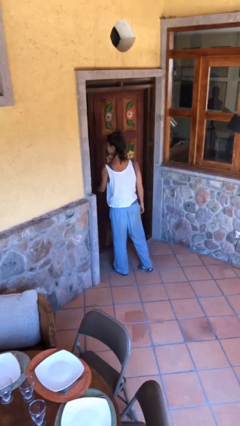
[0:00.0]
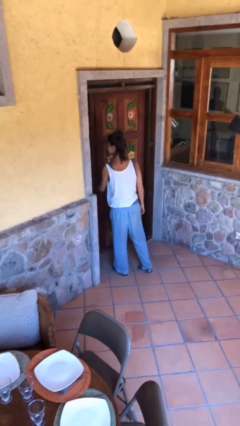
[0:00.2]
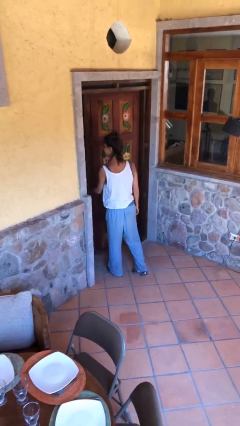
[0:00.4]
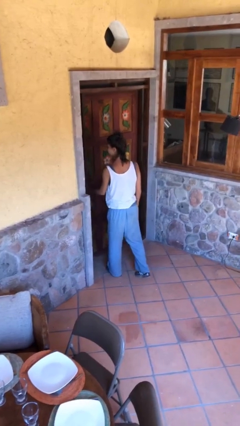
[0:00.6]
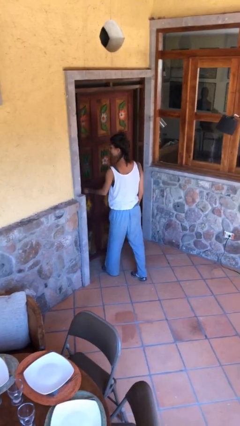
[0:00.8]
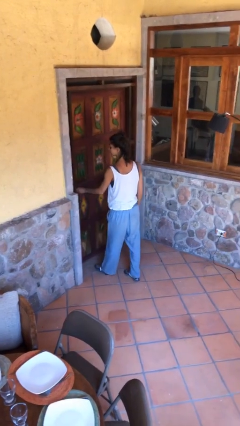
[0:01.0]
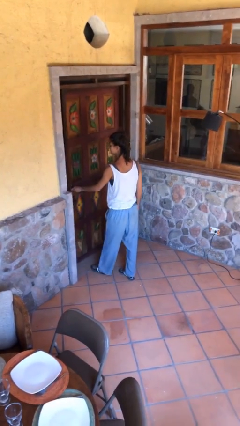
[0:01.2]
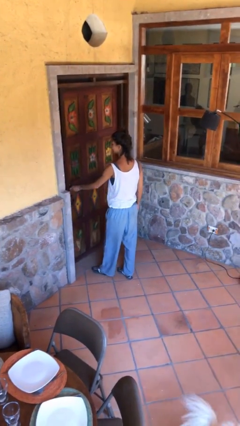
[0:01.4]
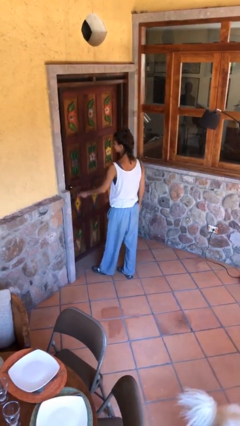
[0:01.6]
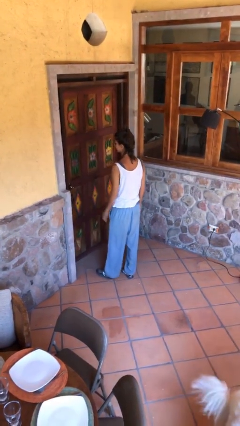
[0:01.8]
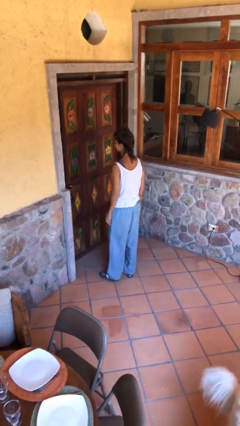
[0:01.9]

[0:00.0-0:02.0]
person closes facility door

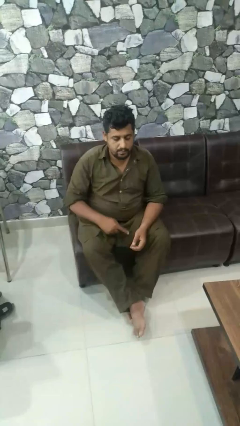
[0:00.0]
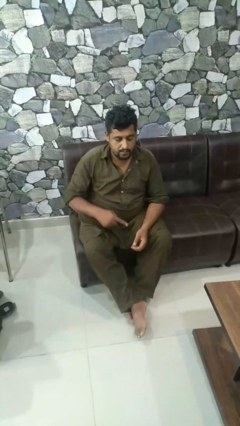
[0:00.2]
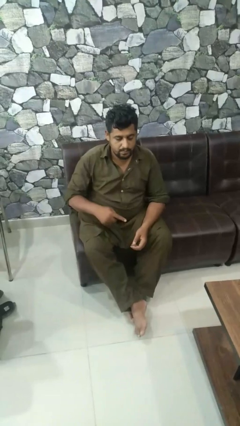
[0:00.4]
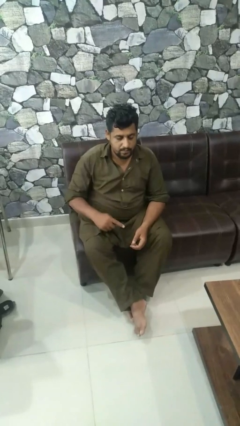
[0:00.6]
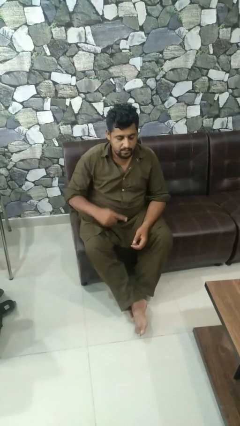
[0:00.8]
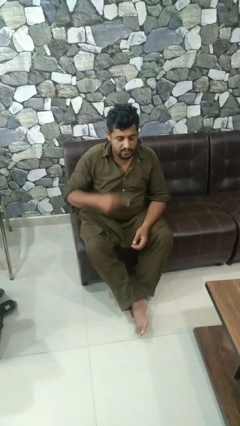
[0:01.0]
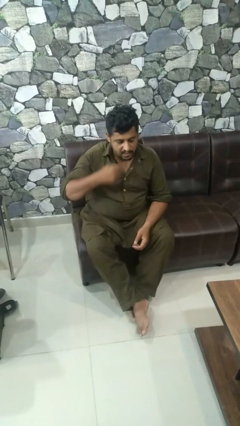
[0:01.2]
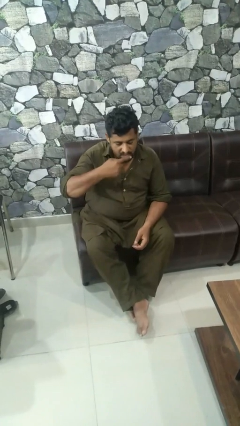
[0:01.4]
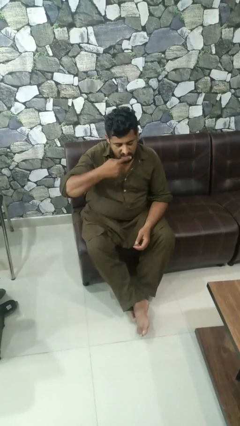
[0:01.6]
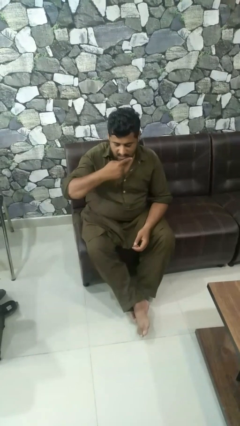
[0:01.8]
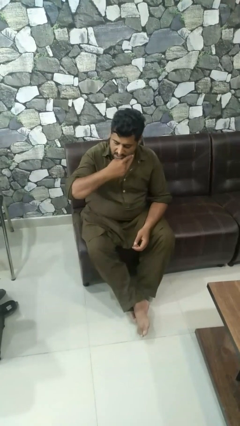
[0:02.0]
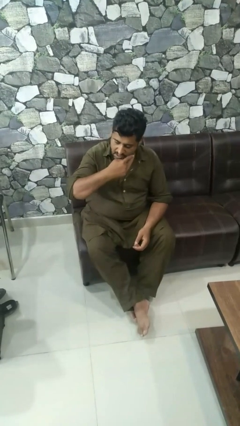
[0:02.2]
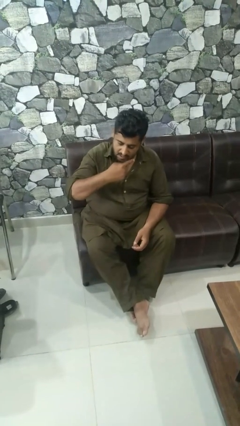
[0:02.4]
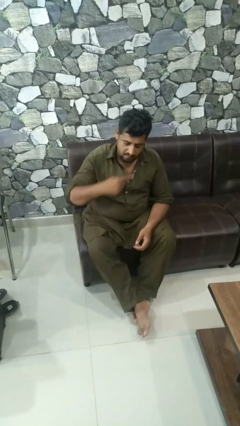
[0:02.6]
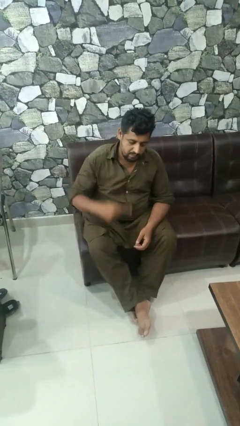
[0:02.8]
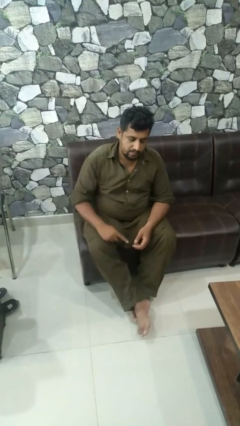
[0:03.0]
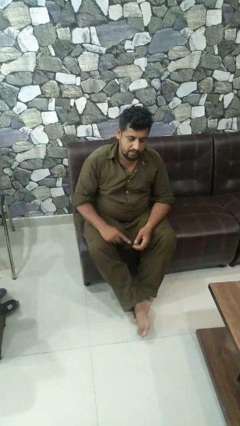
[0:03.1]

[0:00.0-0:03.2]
person brushes teeth

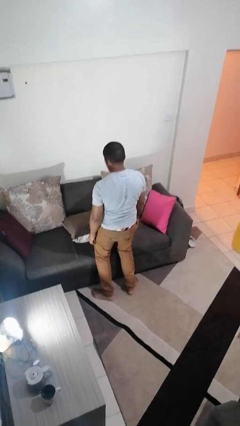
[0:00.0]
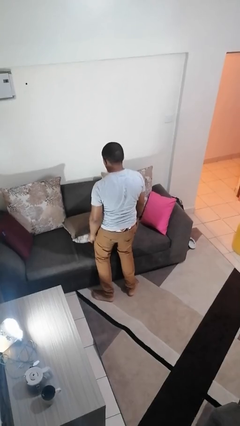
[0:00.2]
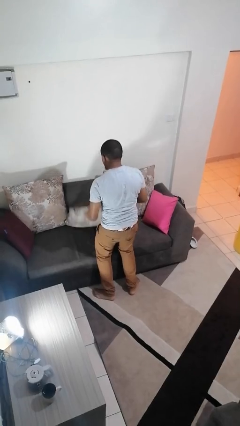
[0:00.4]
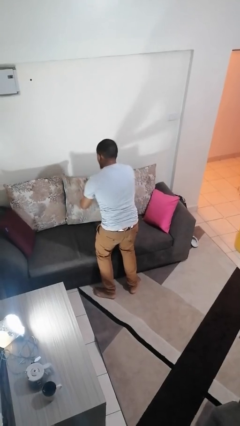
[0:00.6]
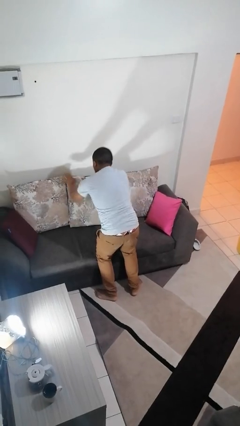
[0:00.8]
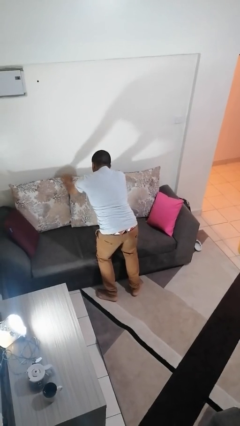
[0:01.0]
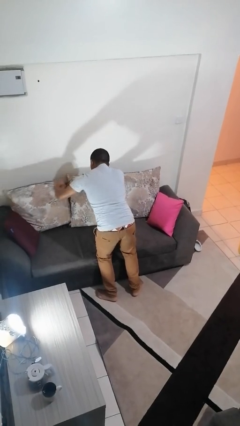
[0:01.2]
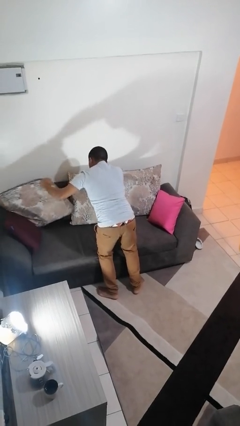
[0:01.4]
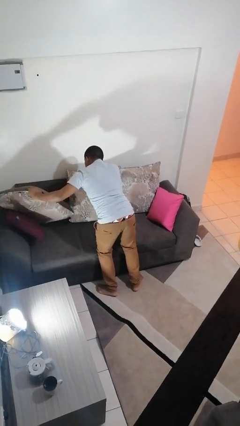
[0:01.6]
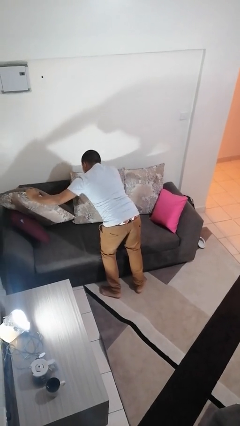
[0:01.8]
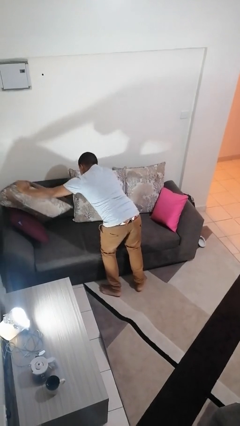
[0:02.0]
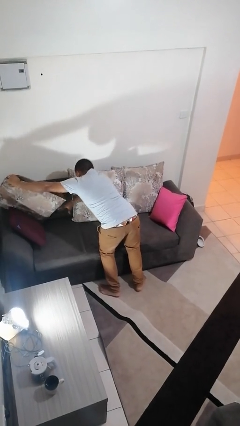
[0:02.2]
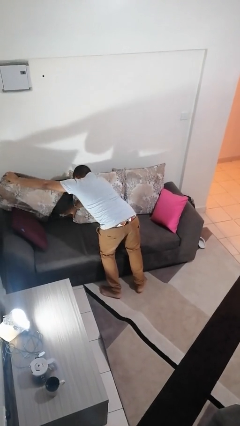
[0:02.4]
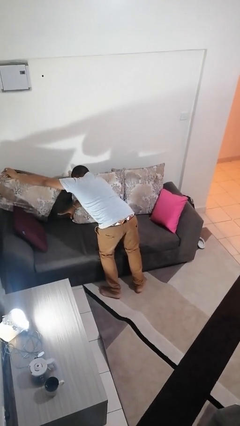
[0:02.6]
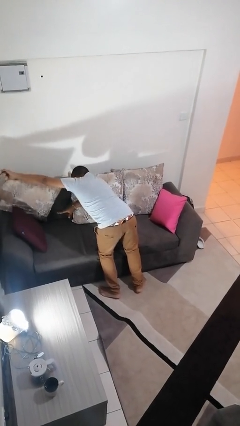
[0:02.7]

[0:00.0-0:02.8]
person searches in couch

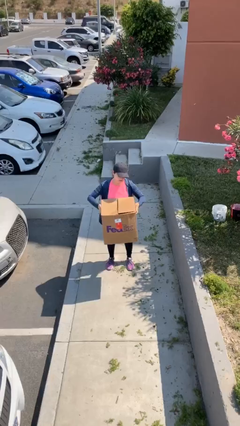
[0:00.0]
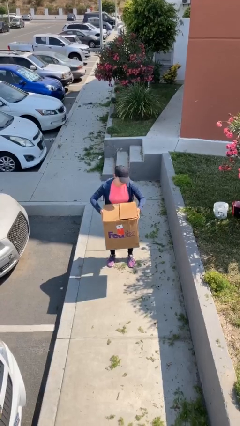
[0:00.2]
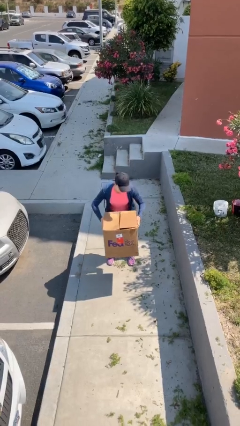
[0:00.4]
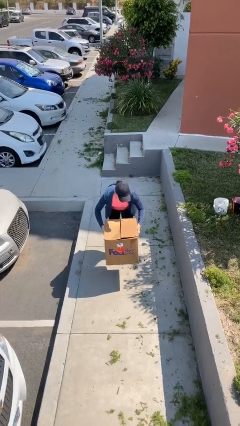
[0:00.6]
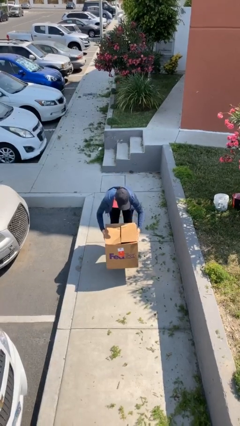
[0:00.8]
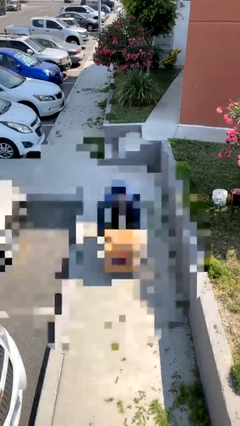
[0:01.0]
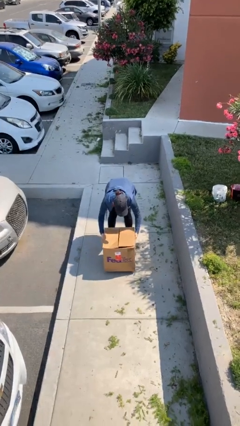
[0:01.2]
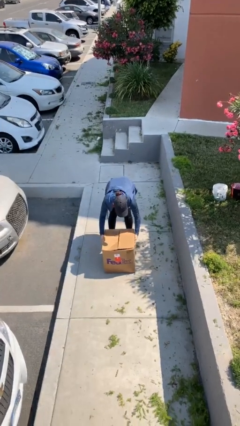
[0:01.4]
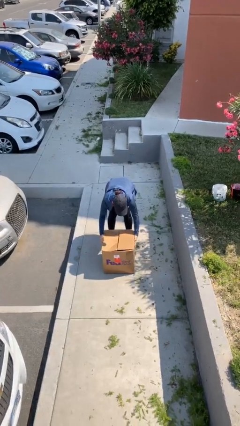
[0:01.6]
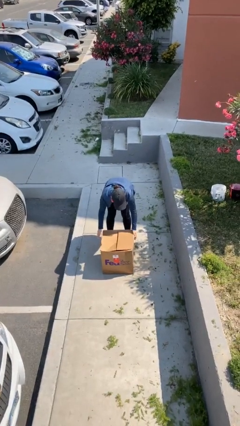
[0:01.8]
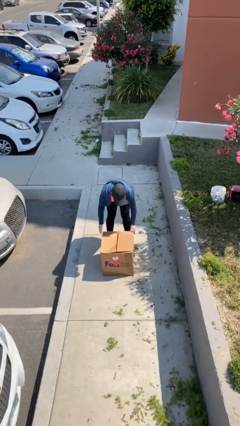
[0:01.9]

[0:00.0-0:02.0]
person puts down object on floor

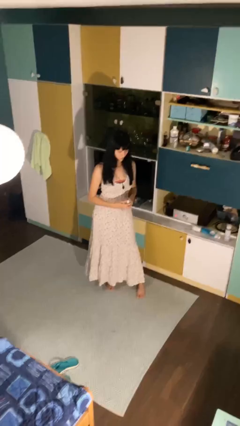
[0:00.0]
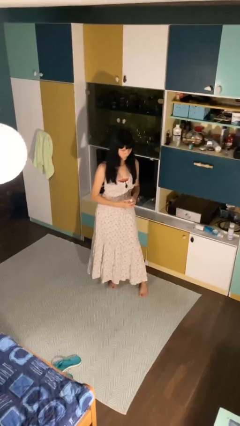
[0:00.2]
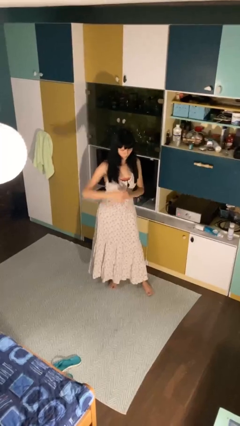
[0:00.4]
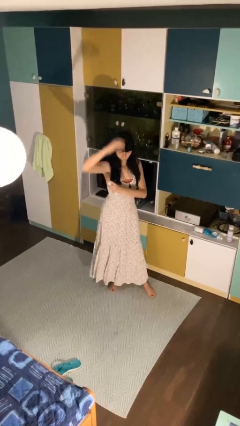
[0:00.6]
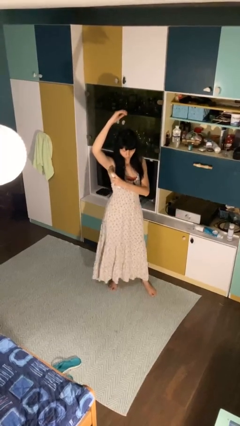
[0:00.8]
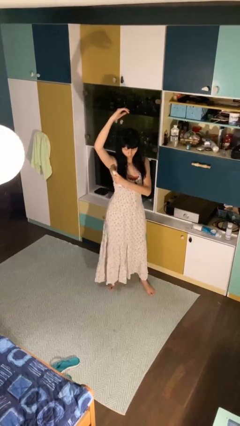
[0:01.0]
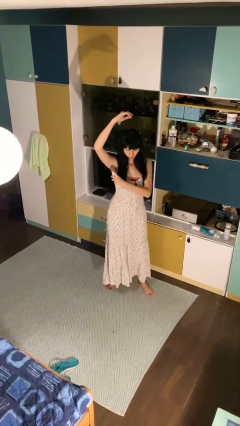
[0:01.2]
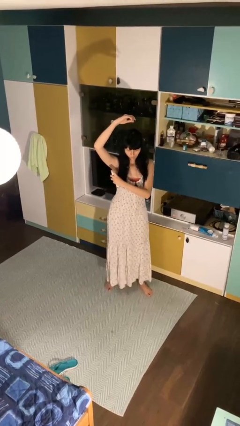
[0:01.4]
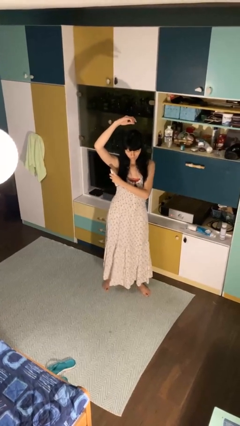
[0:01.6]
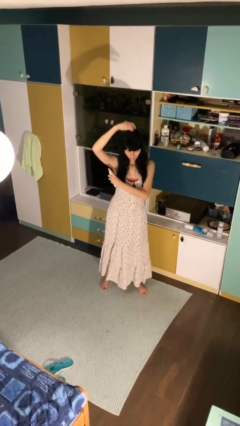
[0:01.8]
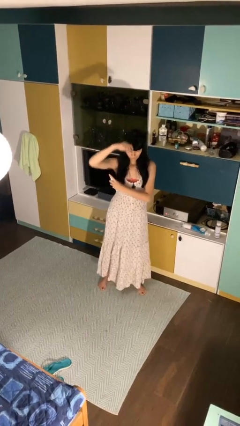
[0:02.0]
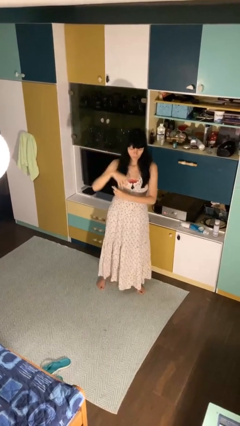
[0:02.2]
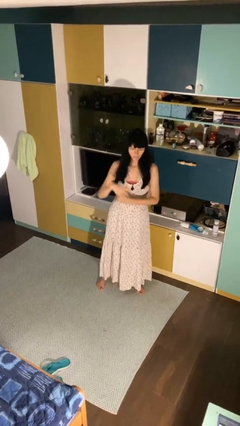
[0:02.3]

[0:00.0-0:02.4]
person applies deodorant

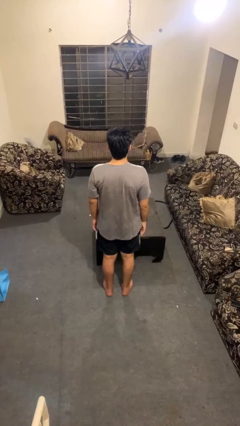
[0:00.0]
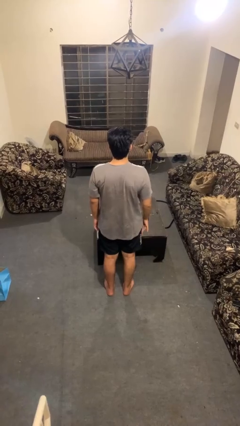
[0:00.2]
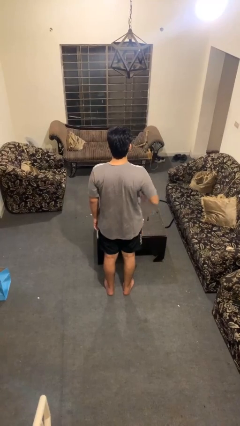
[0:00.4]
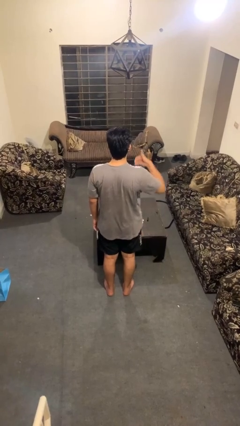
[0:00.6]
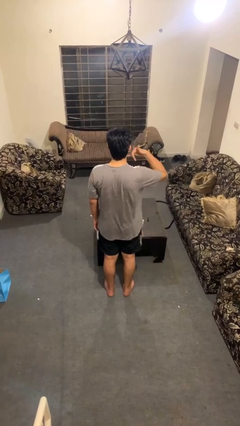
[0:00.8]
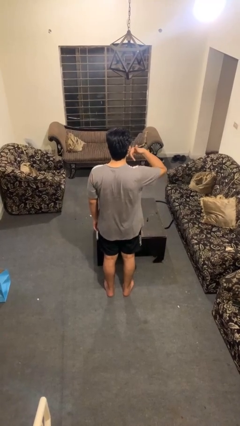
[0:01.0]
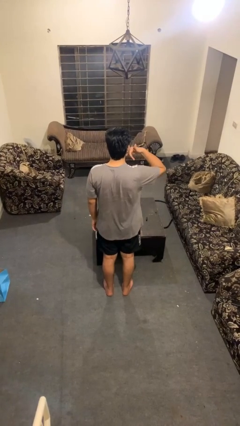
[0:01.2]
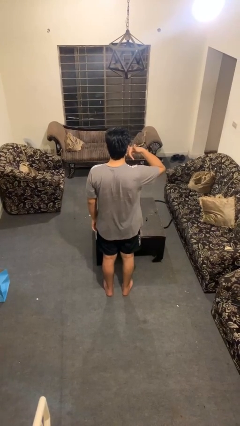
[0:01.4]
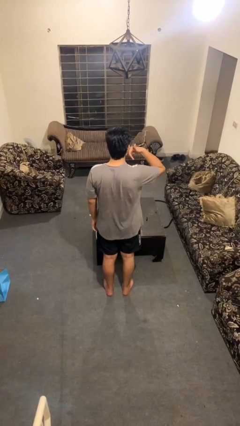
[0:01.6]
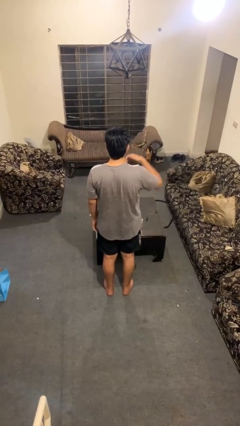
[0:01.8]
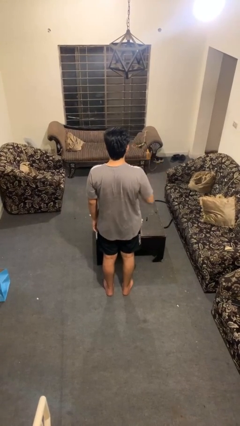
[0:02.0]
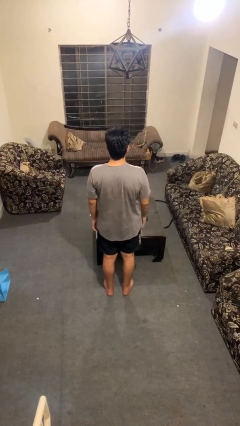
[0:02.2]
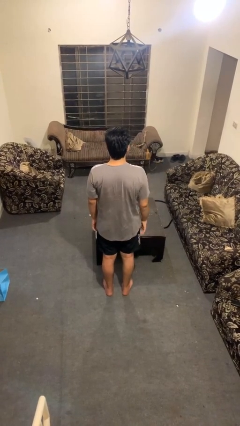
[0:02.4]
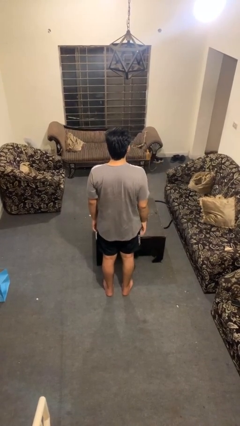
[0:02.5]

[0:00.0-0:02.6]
person gestures call me

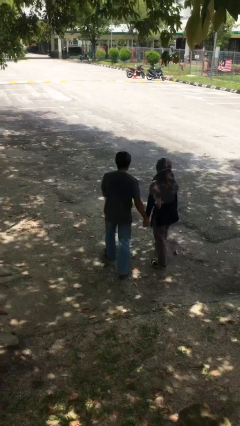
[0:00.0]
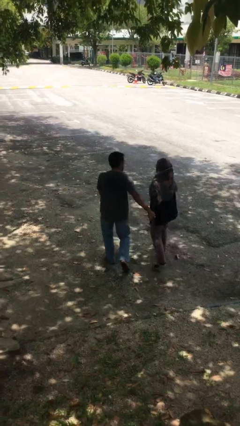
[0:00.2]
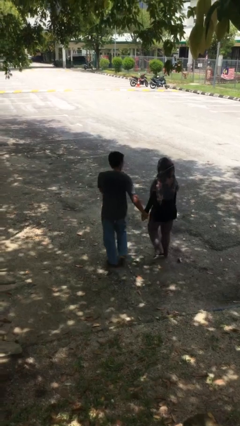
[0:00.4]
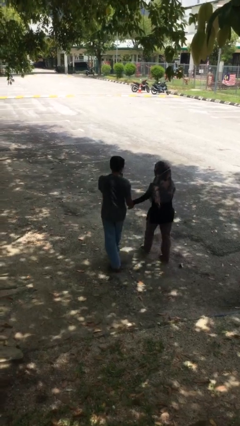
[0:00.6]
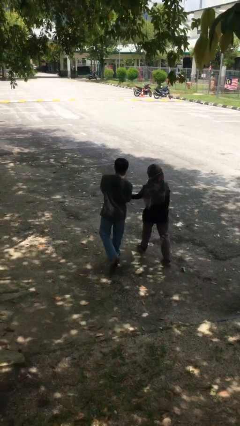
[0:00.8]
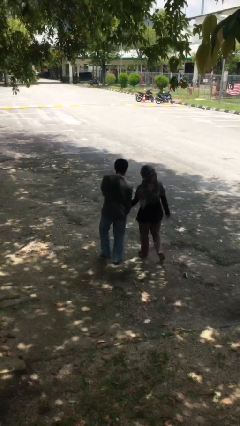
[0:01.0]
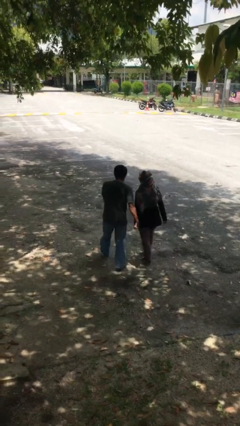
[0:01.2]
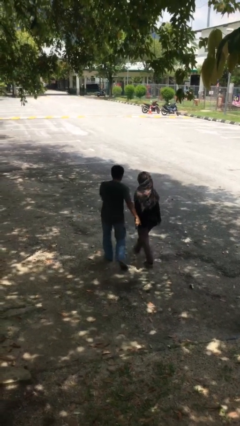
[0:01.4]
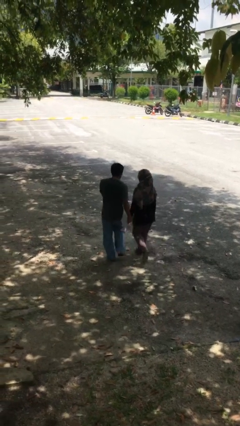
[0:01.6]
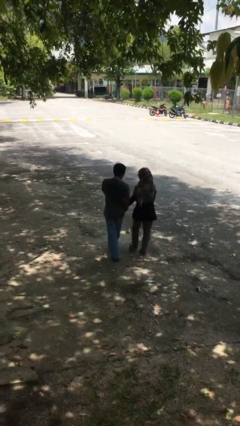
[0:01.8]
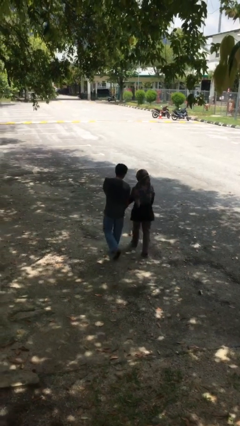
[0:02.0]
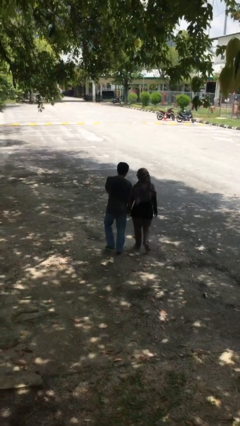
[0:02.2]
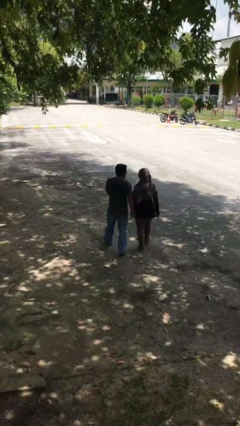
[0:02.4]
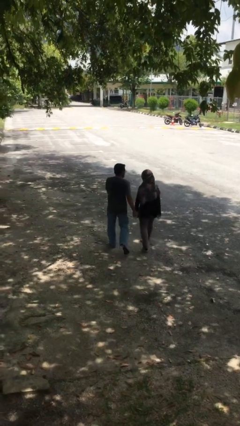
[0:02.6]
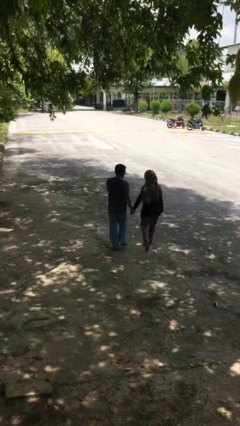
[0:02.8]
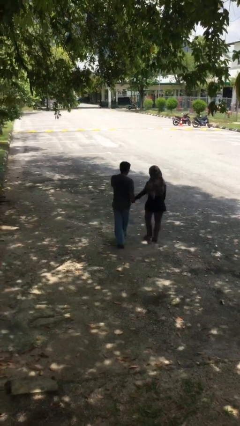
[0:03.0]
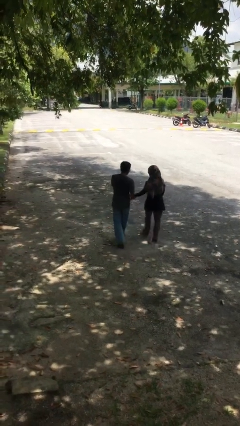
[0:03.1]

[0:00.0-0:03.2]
person holds hand
